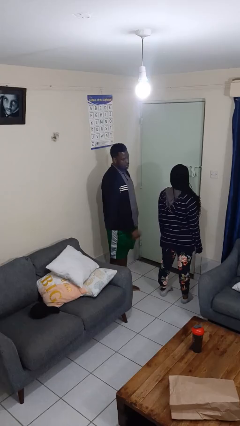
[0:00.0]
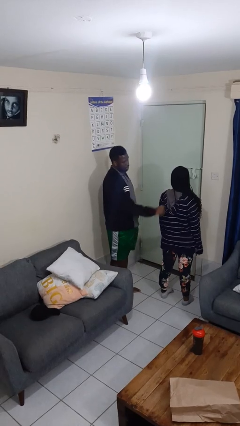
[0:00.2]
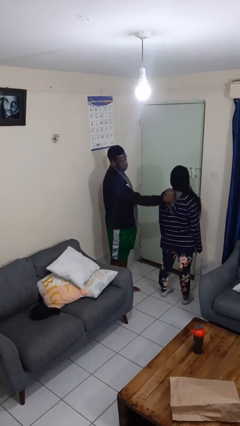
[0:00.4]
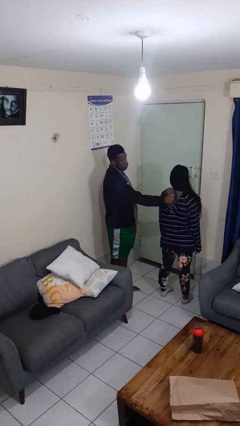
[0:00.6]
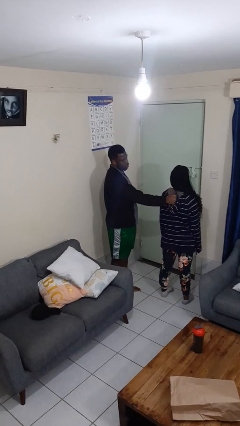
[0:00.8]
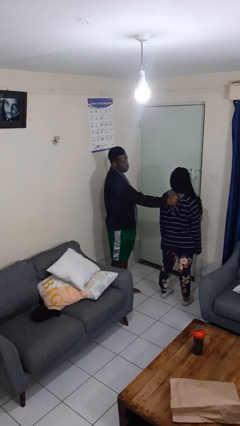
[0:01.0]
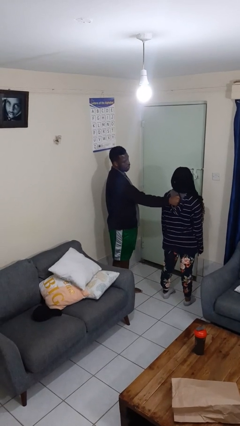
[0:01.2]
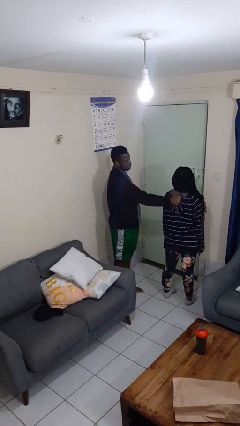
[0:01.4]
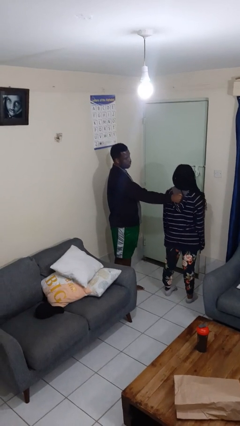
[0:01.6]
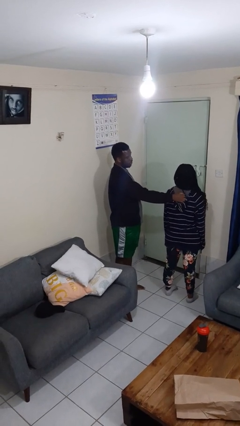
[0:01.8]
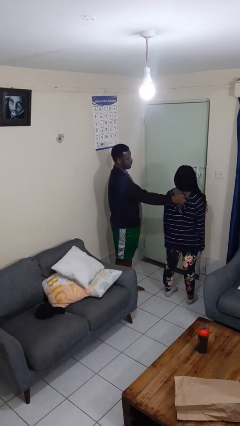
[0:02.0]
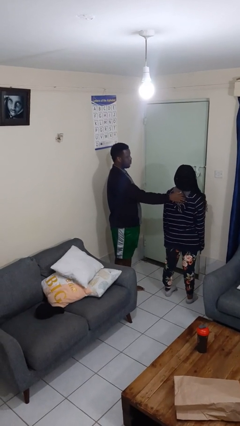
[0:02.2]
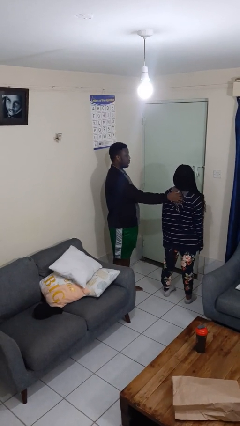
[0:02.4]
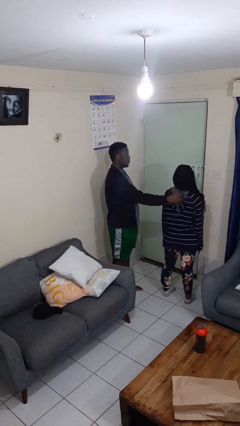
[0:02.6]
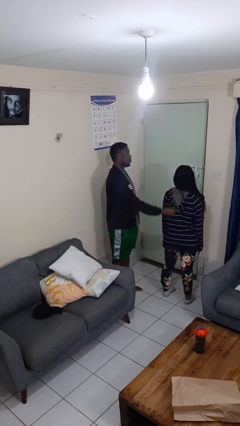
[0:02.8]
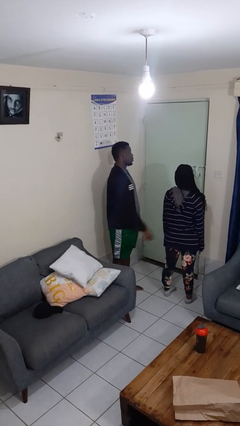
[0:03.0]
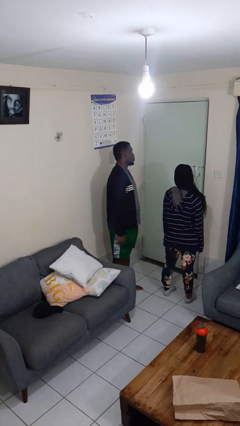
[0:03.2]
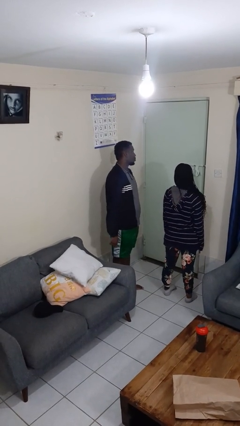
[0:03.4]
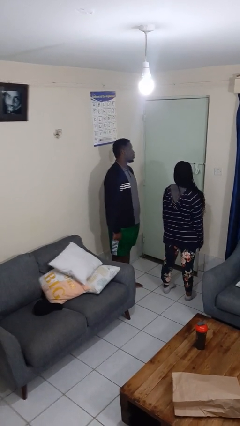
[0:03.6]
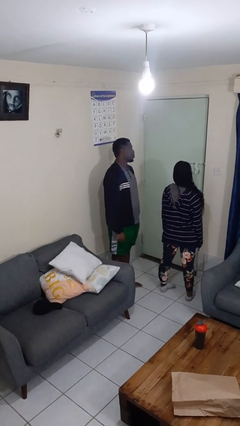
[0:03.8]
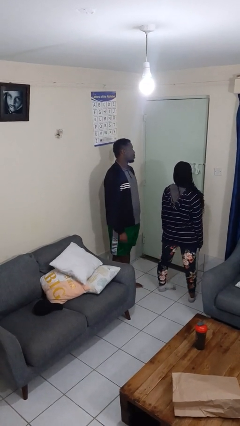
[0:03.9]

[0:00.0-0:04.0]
person touches back of person

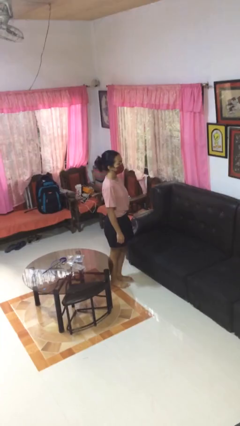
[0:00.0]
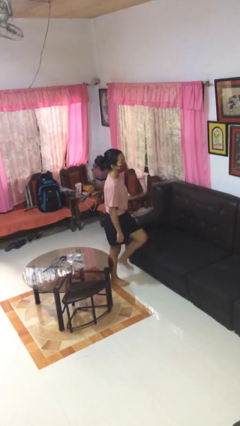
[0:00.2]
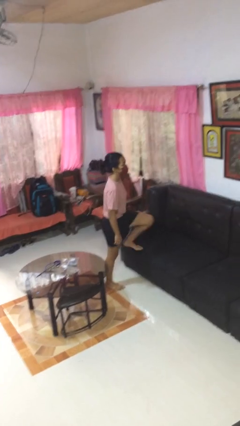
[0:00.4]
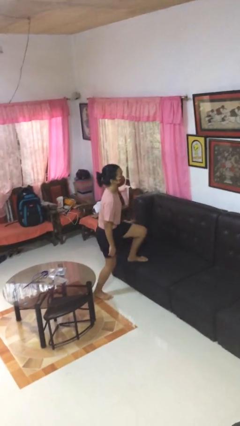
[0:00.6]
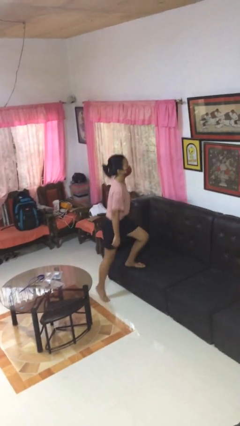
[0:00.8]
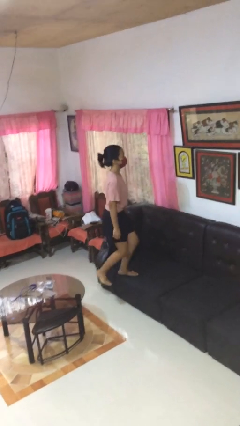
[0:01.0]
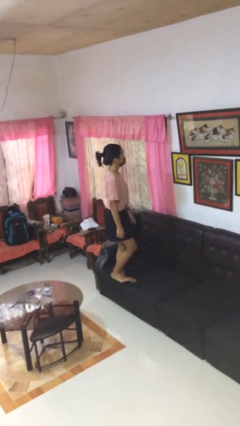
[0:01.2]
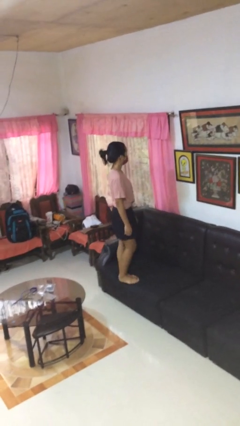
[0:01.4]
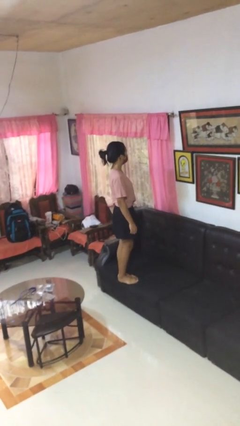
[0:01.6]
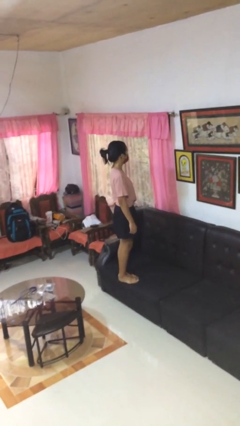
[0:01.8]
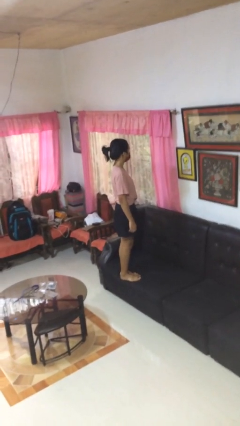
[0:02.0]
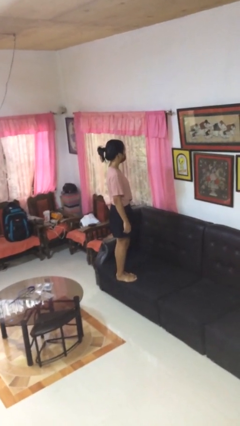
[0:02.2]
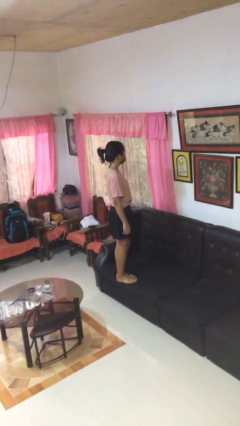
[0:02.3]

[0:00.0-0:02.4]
person climbs on couch

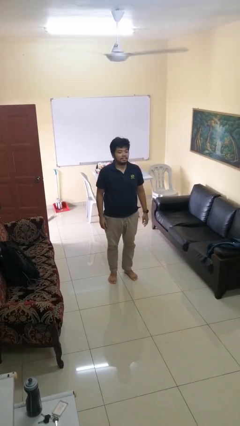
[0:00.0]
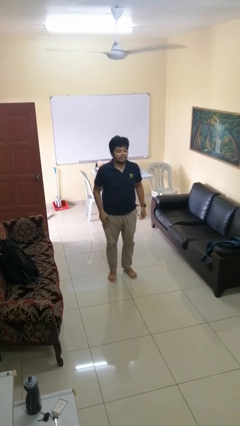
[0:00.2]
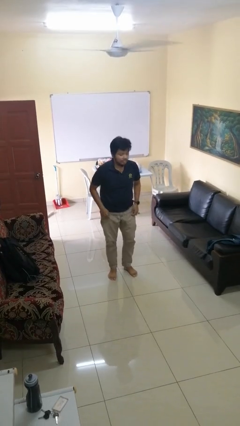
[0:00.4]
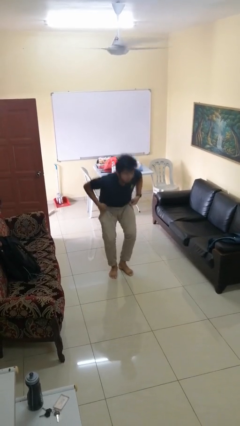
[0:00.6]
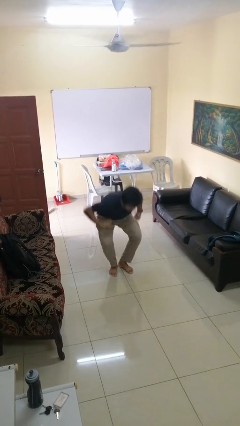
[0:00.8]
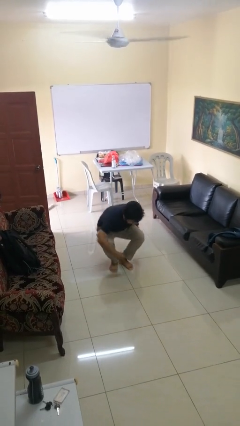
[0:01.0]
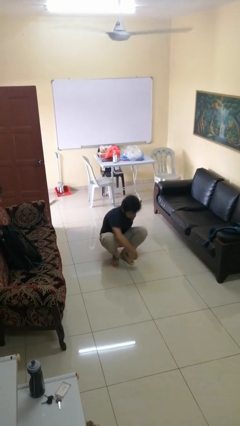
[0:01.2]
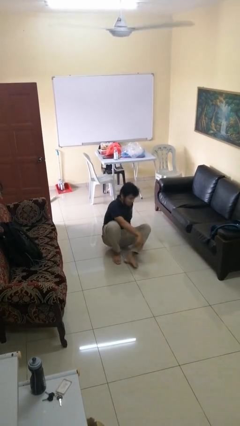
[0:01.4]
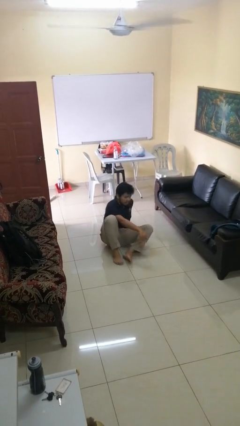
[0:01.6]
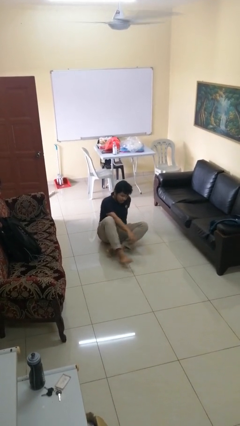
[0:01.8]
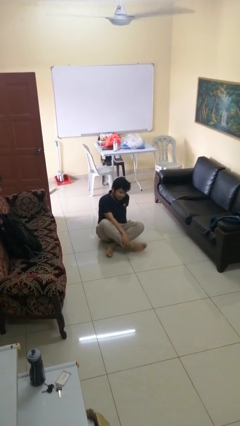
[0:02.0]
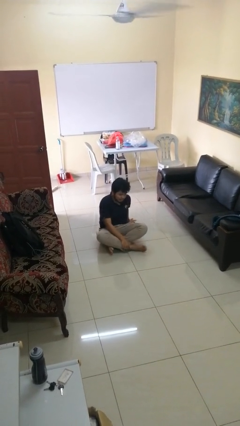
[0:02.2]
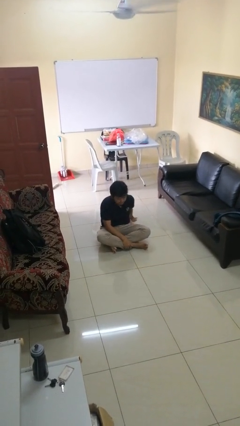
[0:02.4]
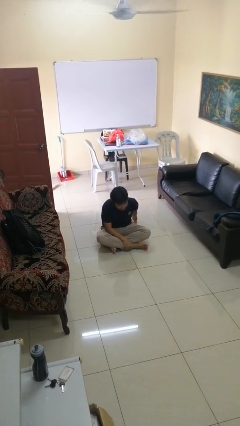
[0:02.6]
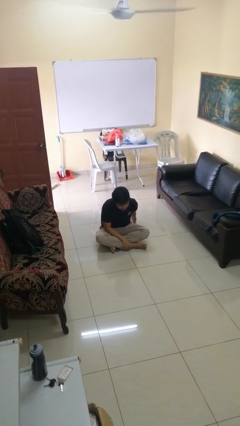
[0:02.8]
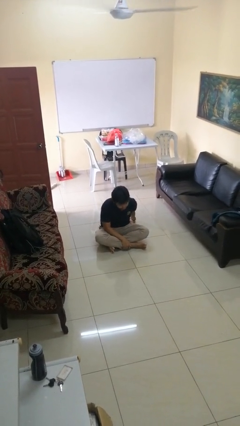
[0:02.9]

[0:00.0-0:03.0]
person sits crisscross

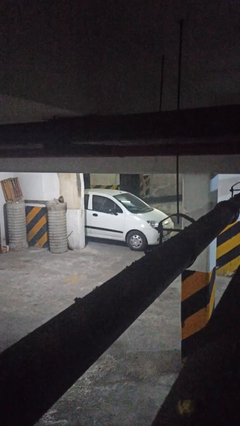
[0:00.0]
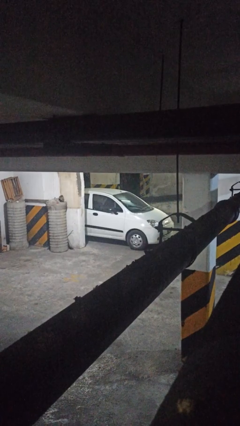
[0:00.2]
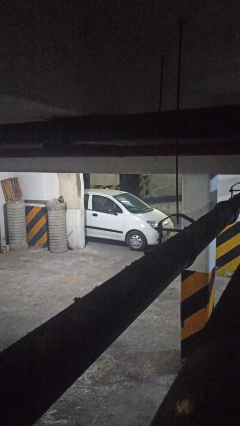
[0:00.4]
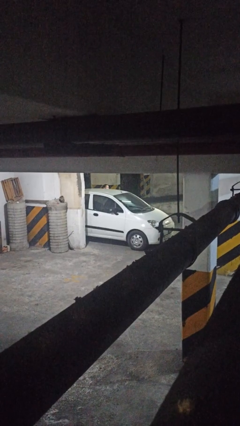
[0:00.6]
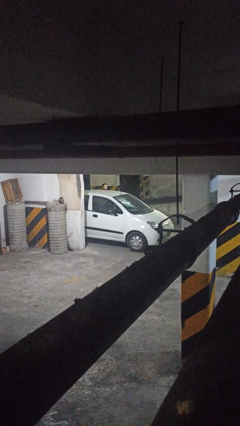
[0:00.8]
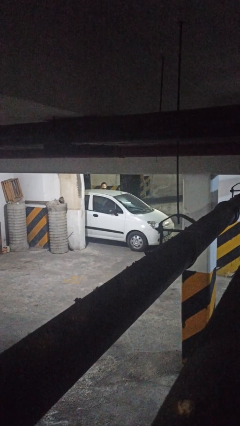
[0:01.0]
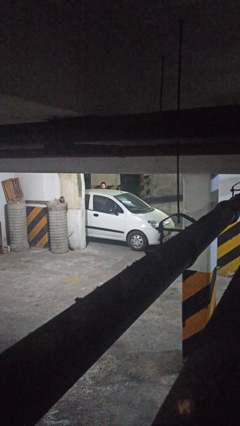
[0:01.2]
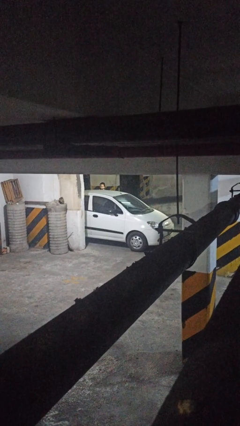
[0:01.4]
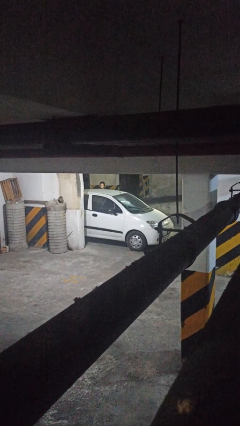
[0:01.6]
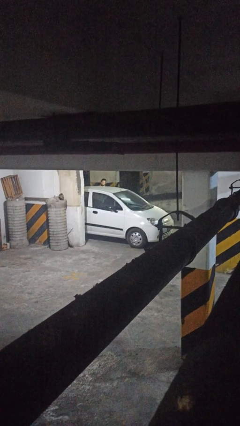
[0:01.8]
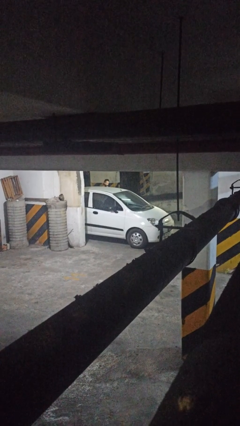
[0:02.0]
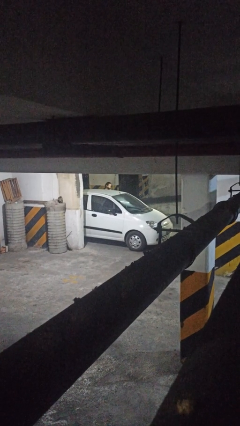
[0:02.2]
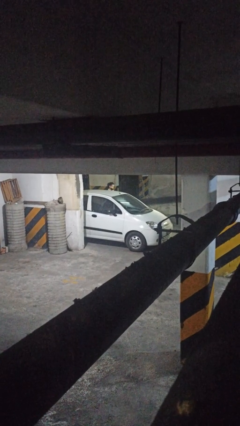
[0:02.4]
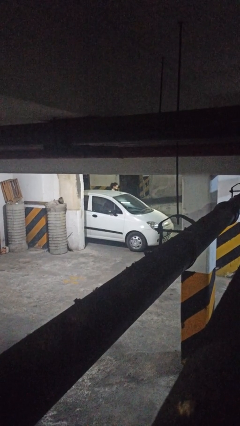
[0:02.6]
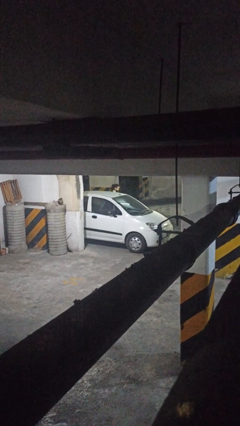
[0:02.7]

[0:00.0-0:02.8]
car drops off person

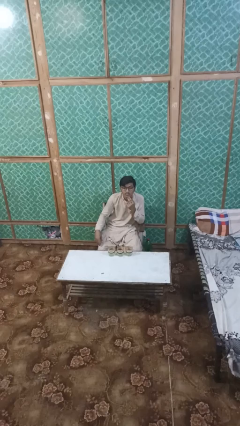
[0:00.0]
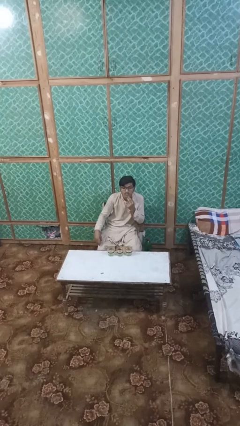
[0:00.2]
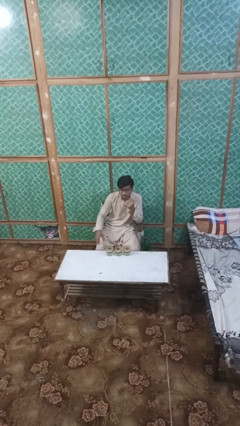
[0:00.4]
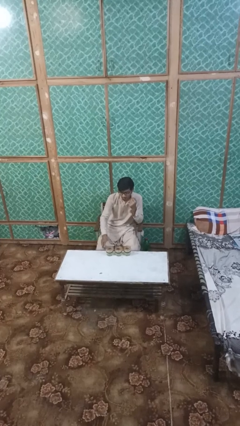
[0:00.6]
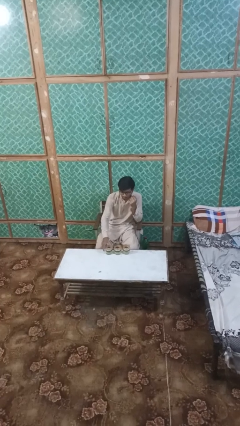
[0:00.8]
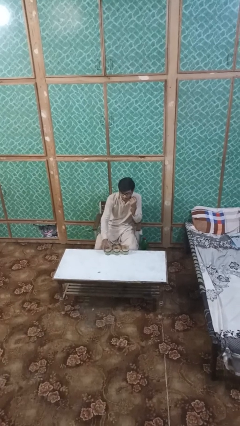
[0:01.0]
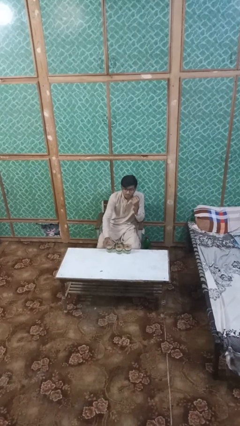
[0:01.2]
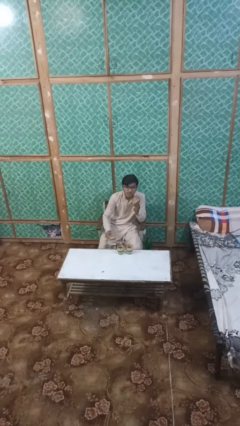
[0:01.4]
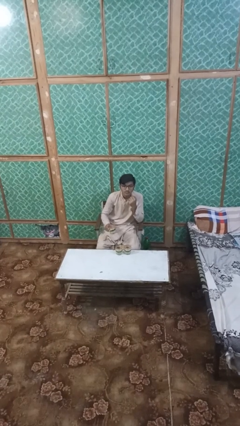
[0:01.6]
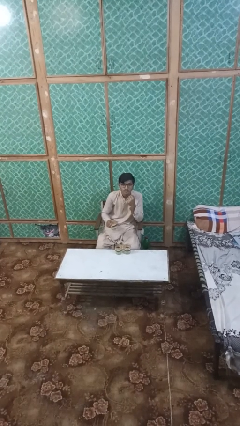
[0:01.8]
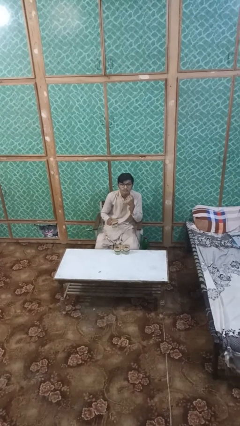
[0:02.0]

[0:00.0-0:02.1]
person picks up object from table

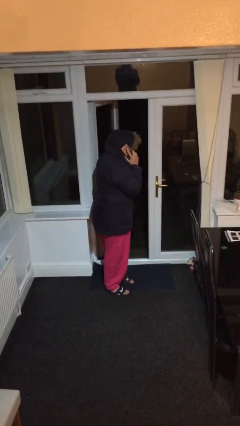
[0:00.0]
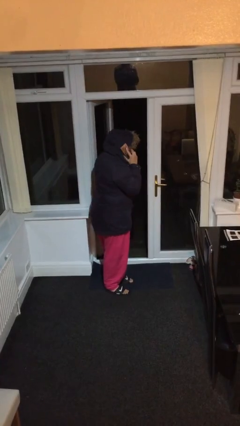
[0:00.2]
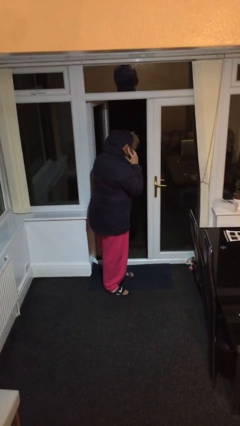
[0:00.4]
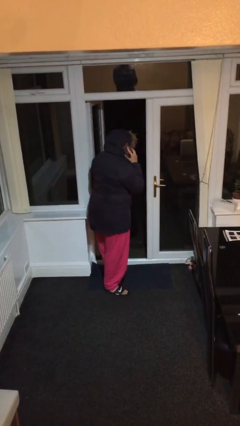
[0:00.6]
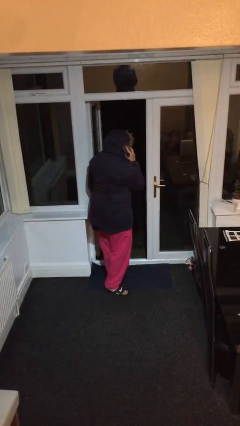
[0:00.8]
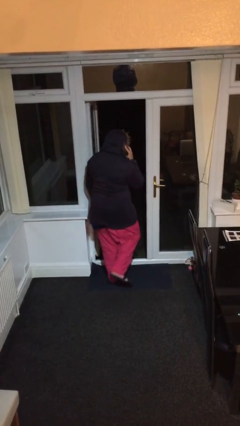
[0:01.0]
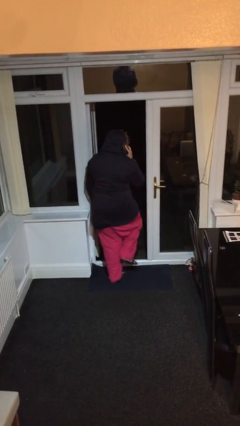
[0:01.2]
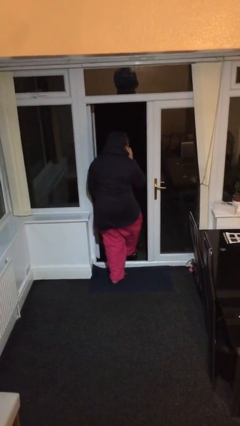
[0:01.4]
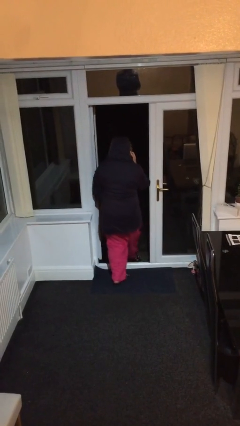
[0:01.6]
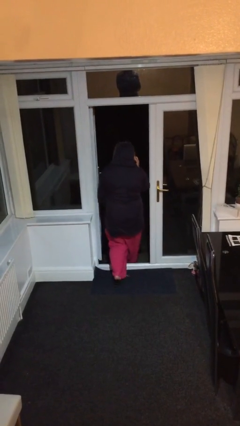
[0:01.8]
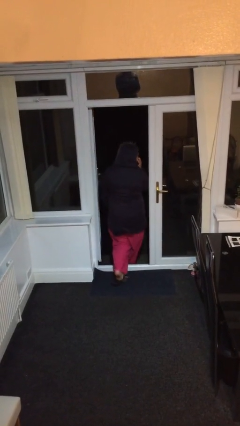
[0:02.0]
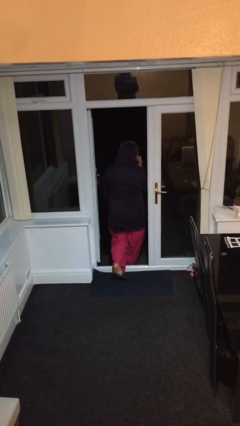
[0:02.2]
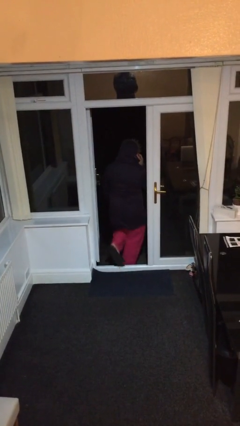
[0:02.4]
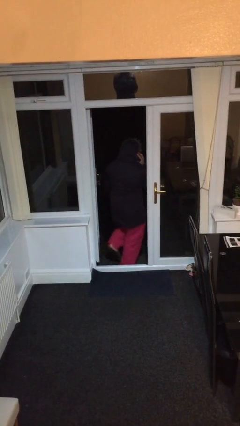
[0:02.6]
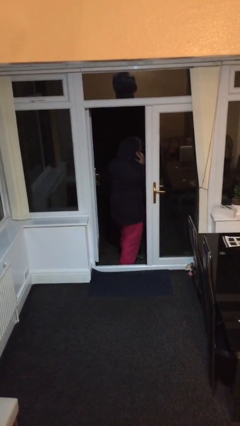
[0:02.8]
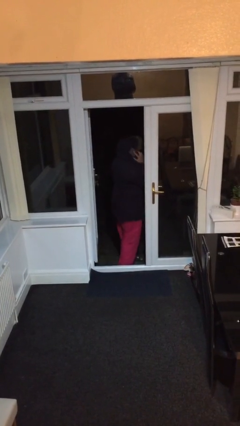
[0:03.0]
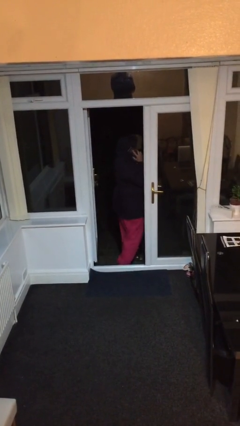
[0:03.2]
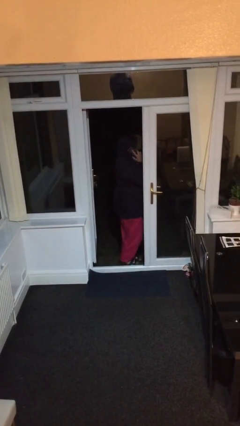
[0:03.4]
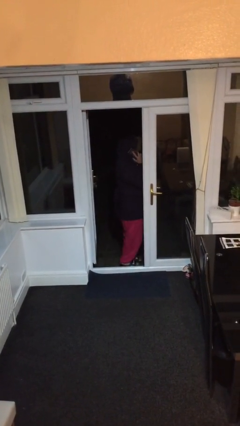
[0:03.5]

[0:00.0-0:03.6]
person exits scene through structure
